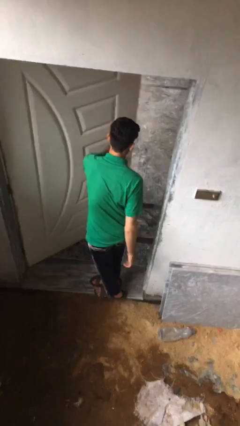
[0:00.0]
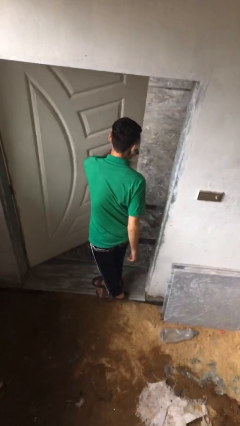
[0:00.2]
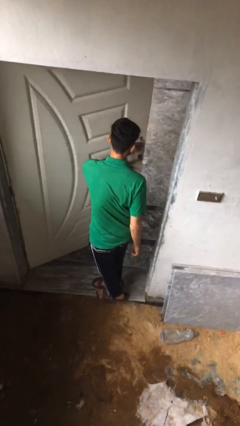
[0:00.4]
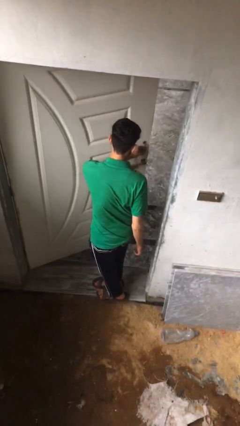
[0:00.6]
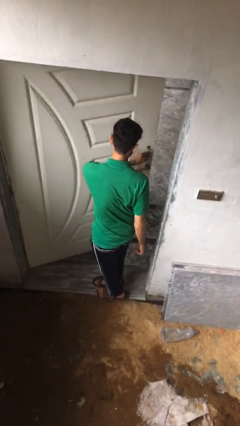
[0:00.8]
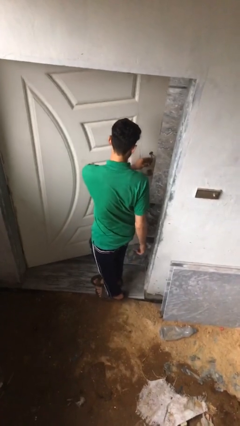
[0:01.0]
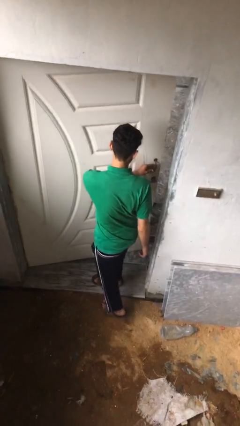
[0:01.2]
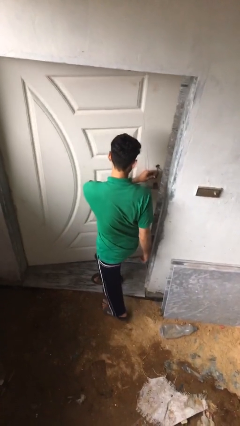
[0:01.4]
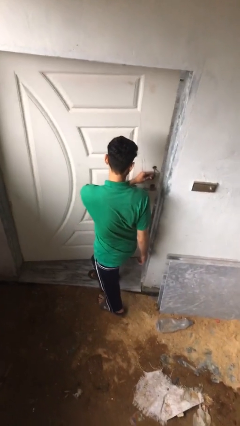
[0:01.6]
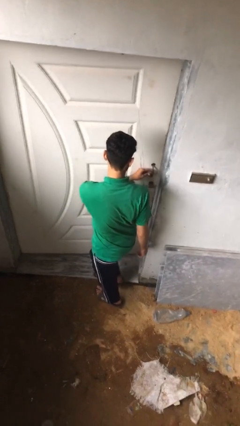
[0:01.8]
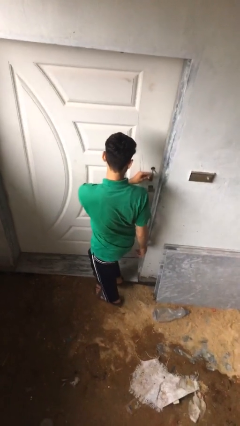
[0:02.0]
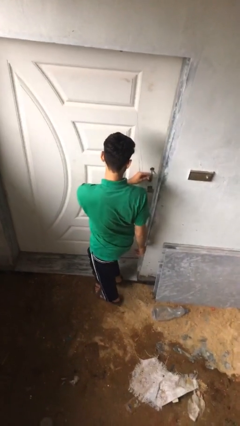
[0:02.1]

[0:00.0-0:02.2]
person closes facility door

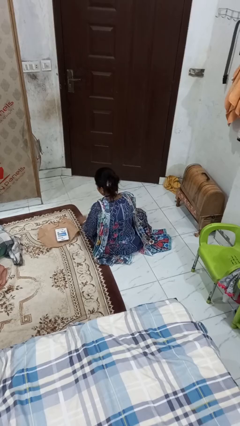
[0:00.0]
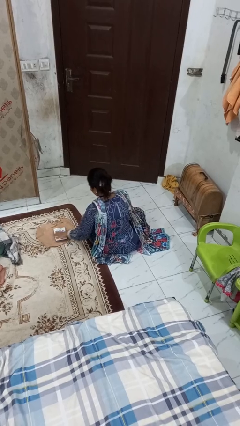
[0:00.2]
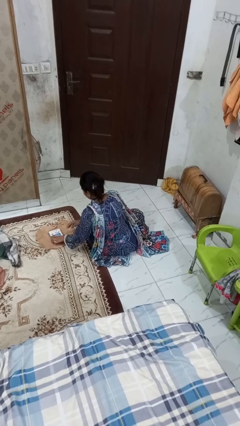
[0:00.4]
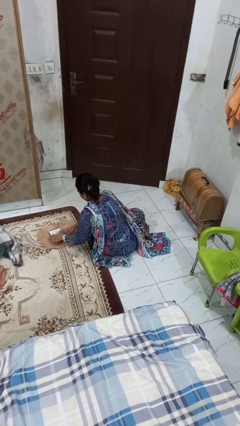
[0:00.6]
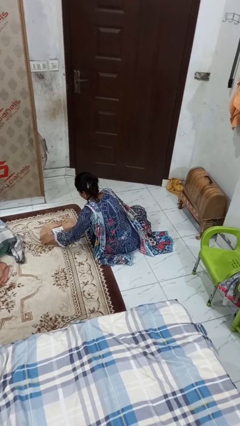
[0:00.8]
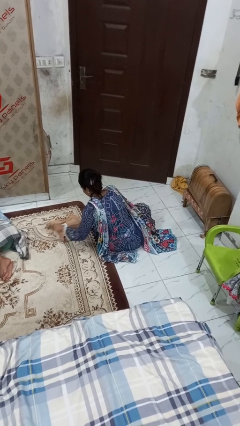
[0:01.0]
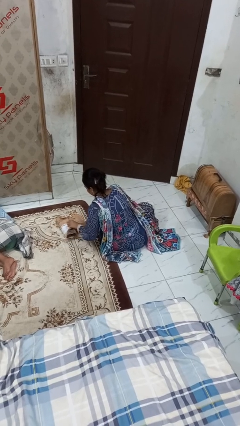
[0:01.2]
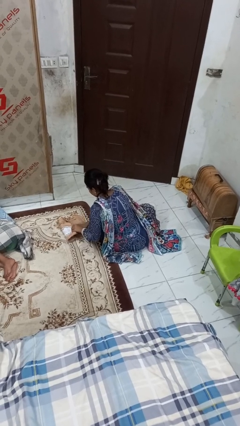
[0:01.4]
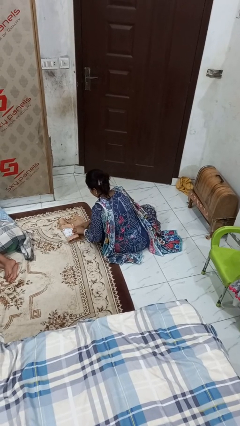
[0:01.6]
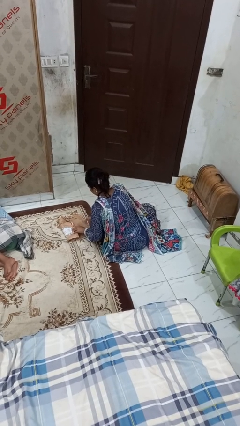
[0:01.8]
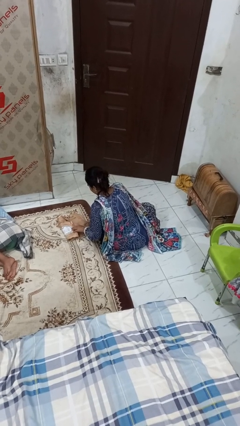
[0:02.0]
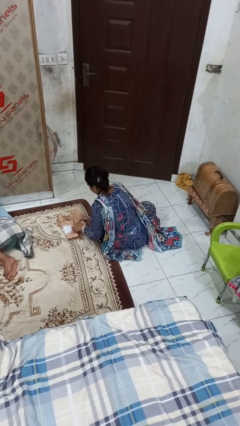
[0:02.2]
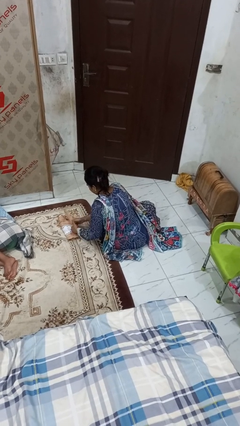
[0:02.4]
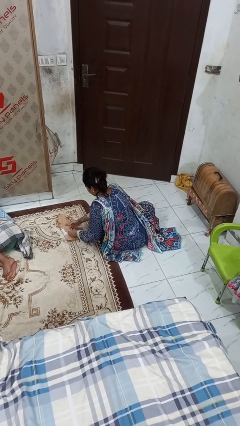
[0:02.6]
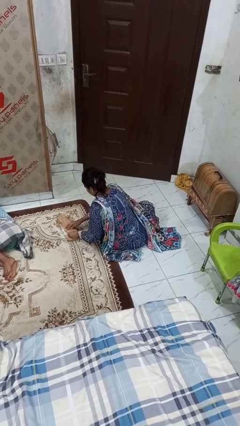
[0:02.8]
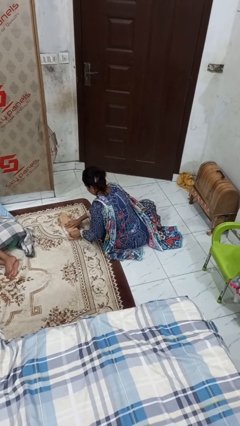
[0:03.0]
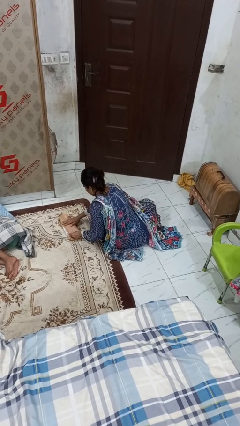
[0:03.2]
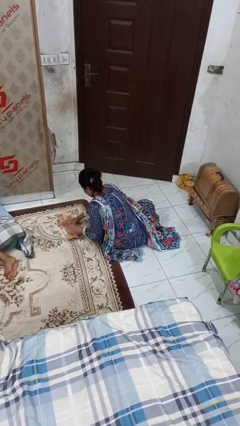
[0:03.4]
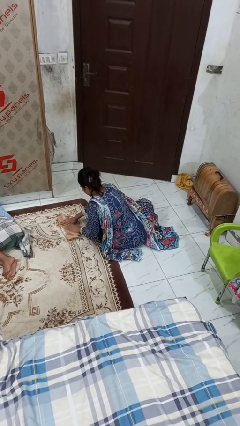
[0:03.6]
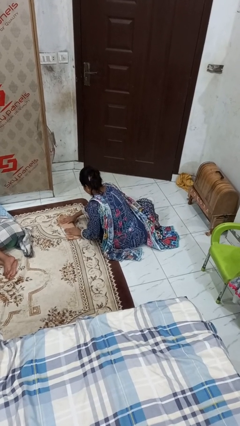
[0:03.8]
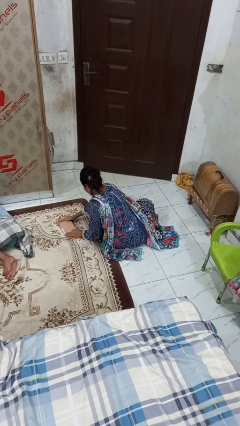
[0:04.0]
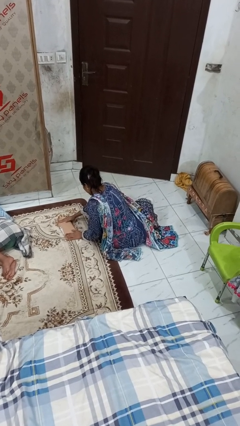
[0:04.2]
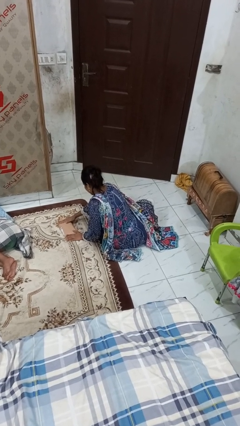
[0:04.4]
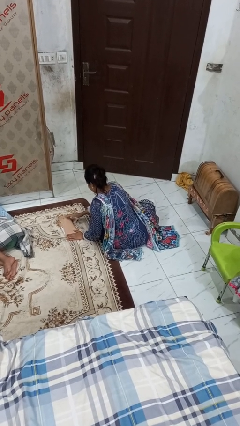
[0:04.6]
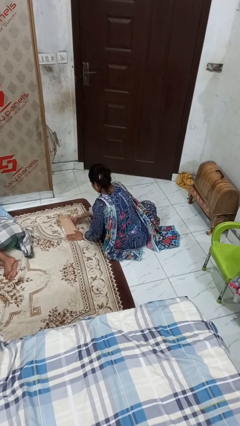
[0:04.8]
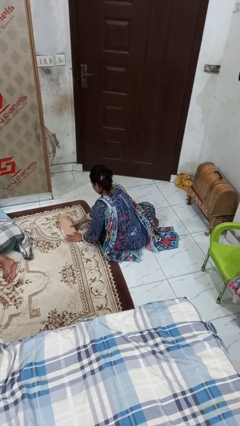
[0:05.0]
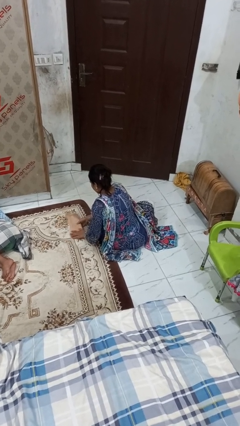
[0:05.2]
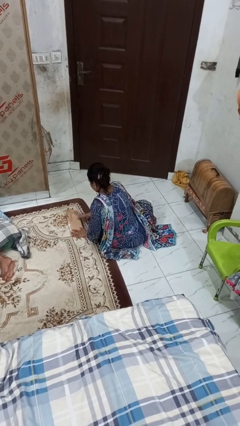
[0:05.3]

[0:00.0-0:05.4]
person wraps box

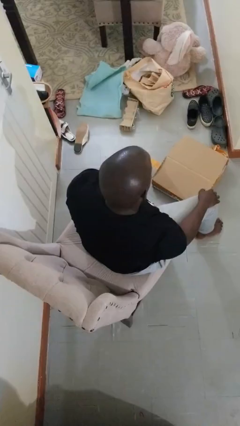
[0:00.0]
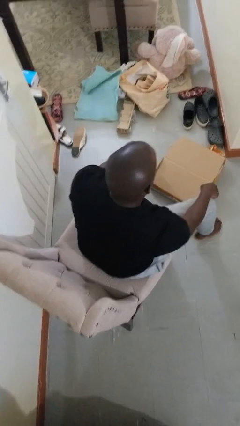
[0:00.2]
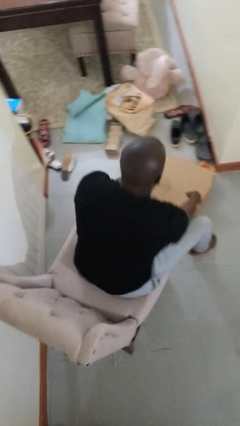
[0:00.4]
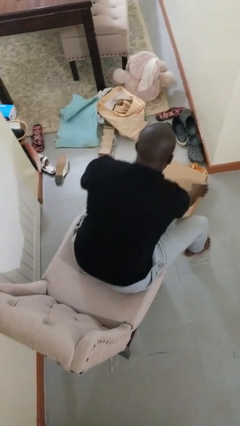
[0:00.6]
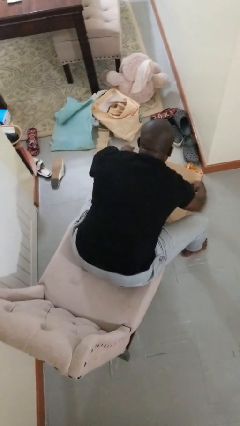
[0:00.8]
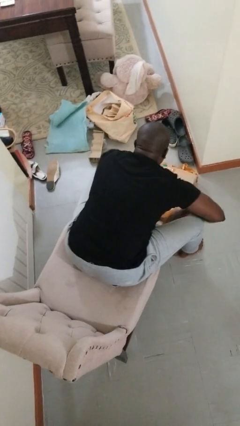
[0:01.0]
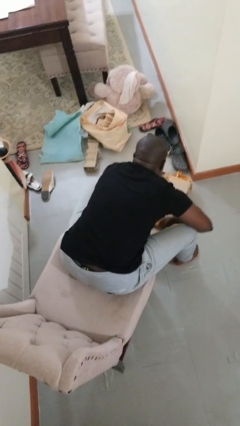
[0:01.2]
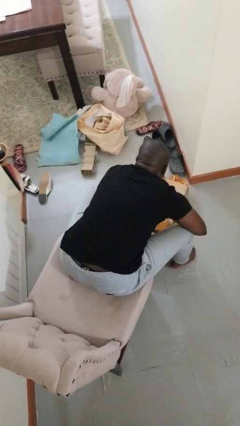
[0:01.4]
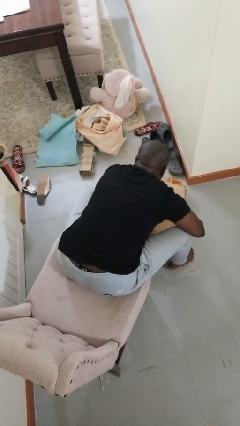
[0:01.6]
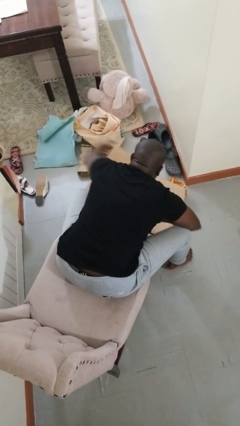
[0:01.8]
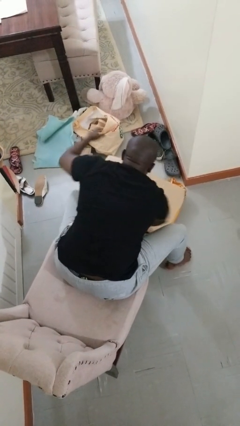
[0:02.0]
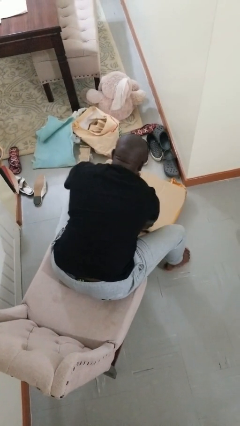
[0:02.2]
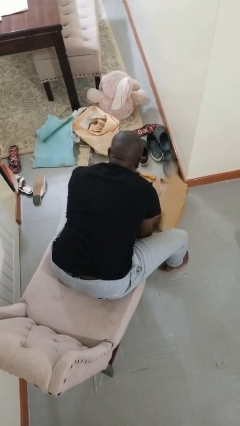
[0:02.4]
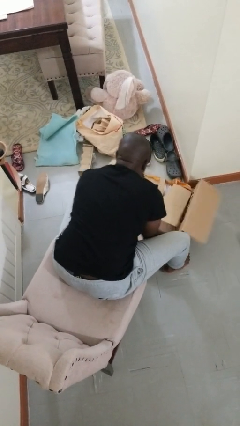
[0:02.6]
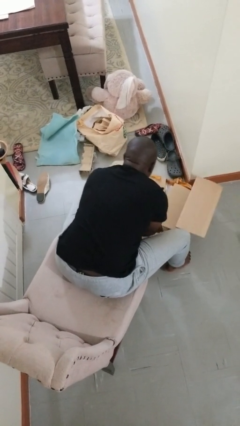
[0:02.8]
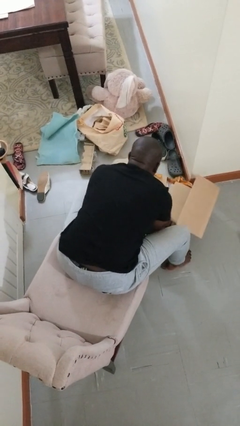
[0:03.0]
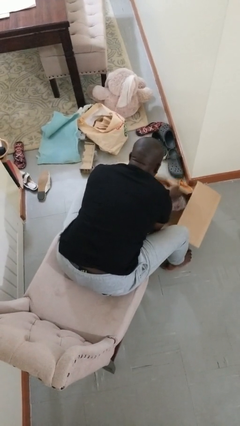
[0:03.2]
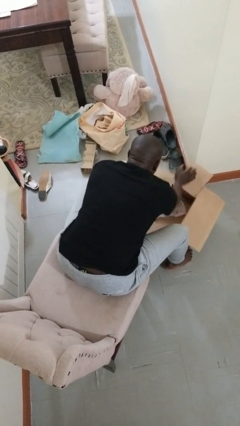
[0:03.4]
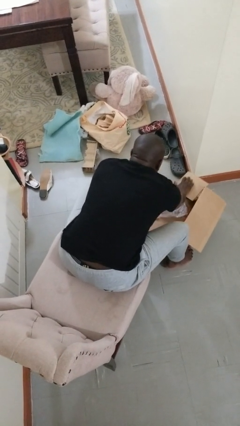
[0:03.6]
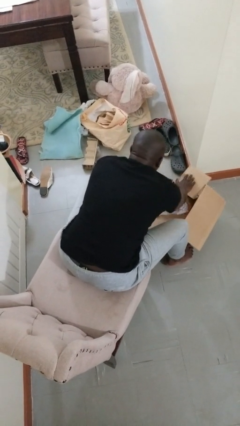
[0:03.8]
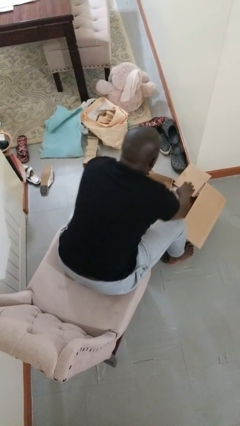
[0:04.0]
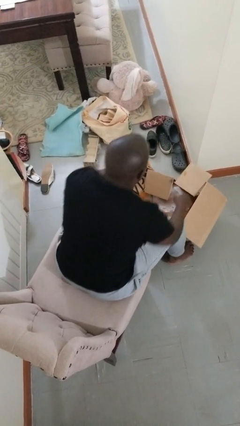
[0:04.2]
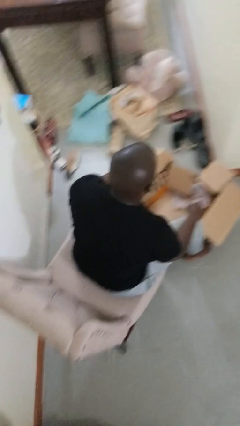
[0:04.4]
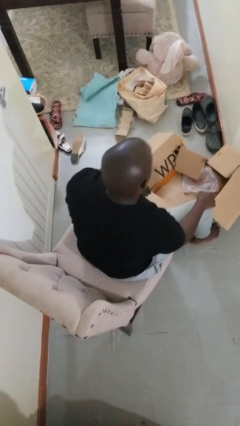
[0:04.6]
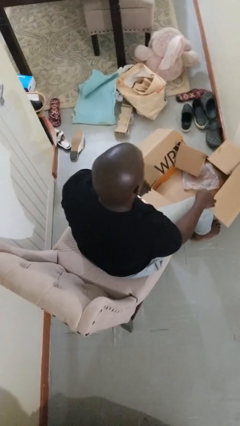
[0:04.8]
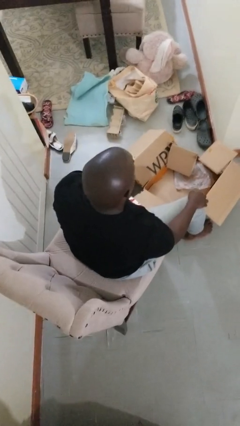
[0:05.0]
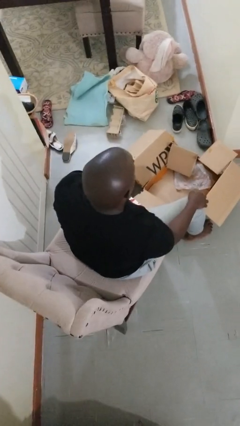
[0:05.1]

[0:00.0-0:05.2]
person opens box

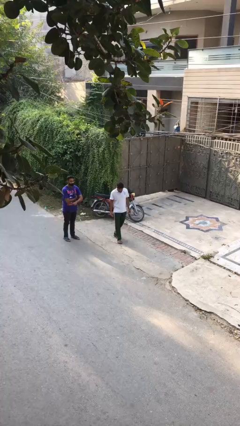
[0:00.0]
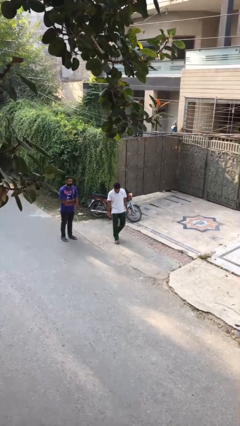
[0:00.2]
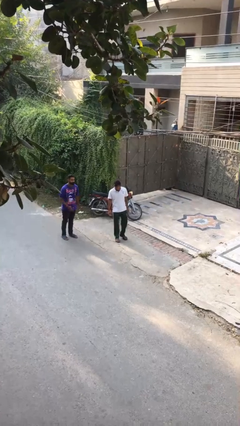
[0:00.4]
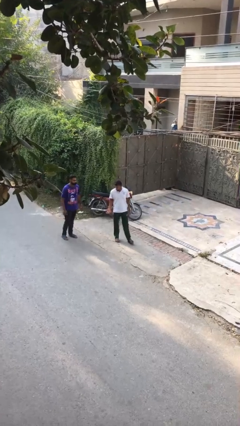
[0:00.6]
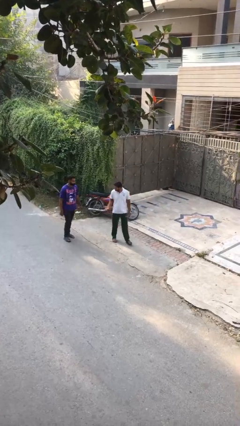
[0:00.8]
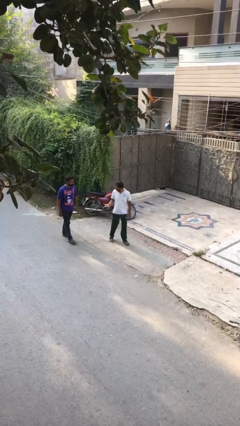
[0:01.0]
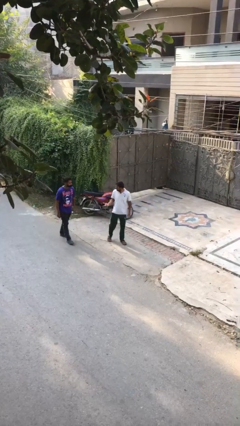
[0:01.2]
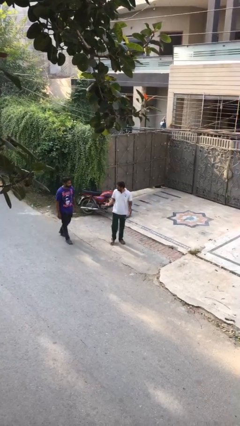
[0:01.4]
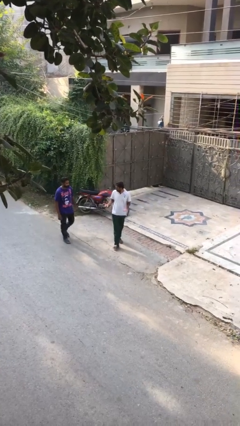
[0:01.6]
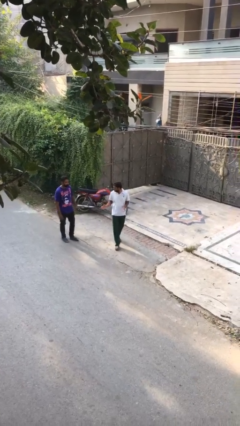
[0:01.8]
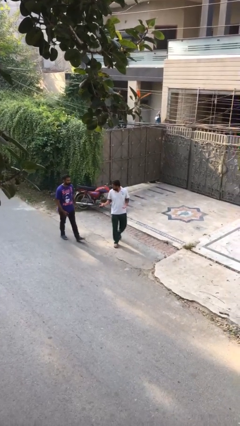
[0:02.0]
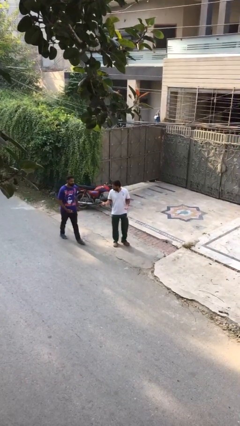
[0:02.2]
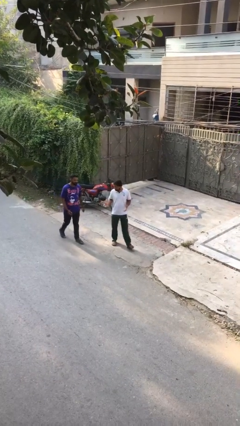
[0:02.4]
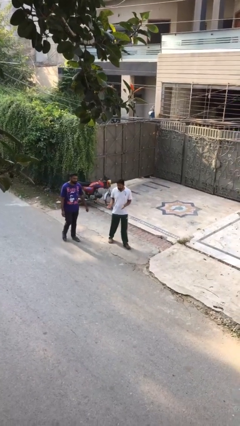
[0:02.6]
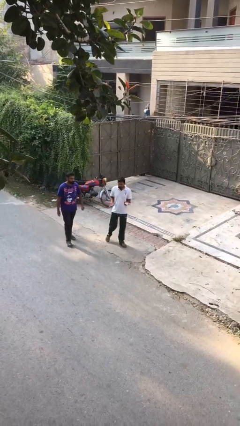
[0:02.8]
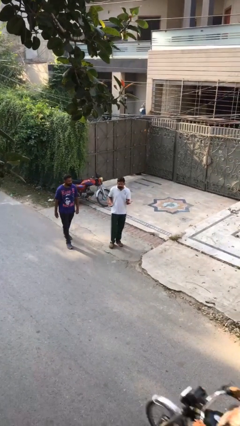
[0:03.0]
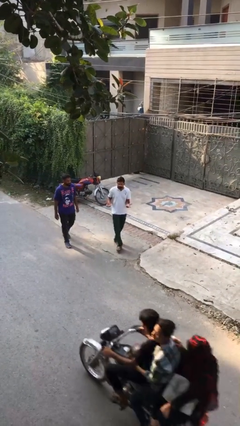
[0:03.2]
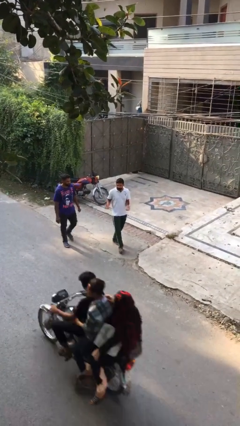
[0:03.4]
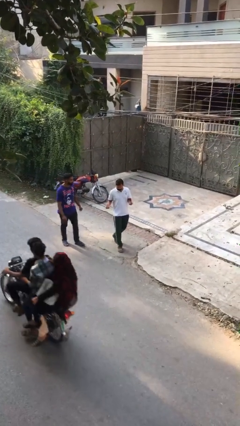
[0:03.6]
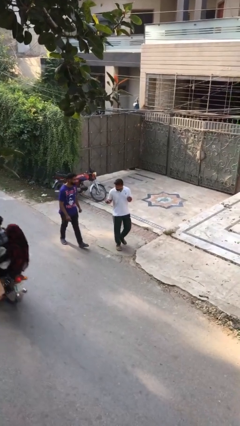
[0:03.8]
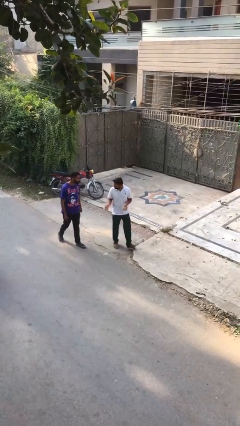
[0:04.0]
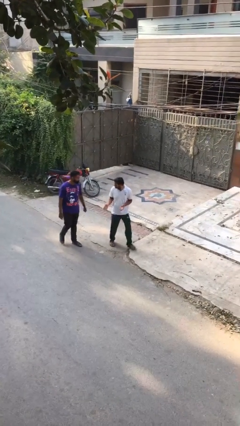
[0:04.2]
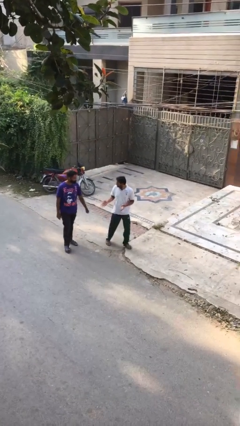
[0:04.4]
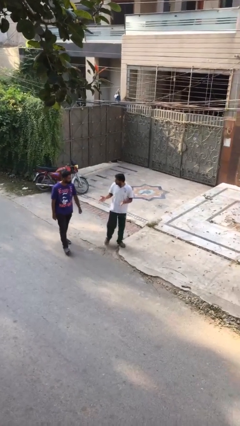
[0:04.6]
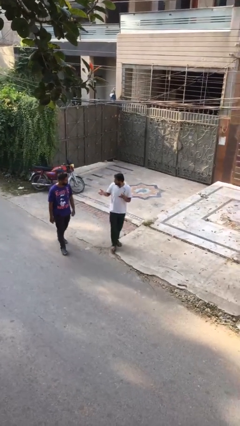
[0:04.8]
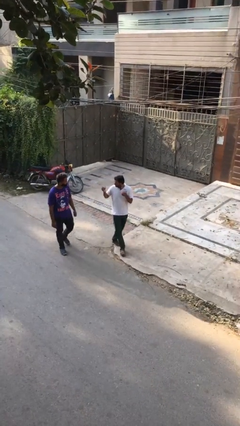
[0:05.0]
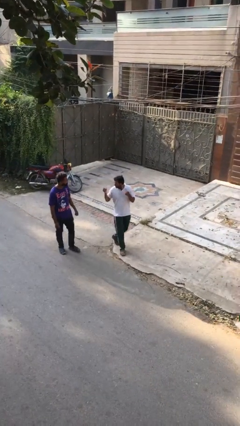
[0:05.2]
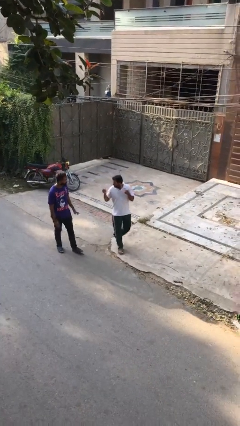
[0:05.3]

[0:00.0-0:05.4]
person talks to person
